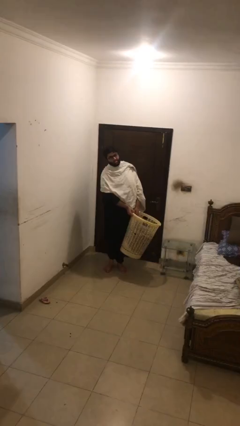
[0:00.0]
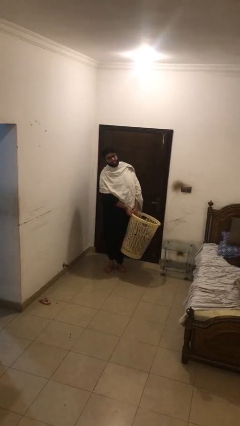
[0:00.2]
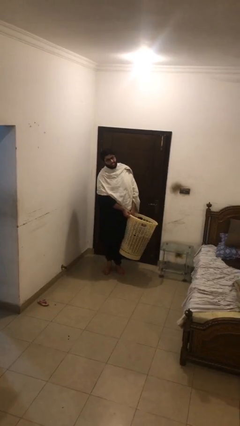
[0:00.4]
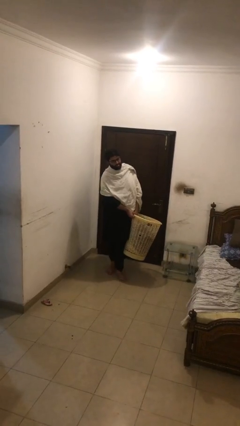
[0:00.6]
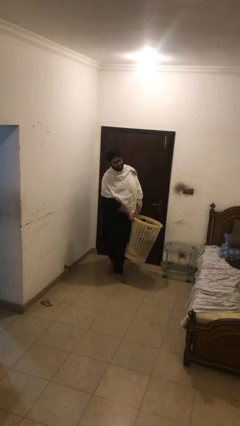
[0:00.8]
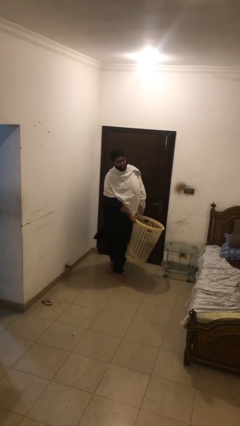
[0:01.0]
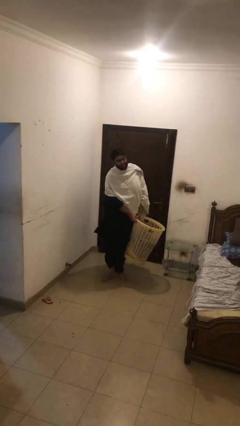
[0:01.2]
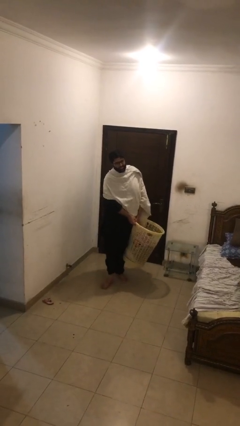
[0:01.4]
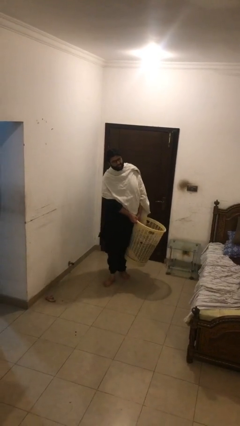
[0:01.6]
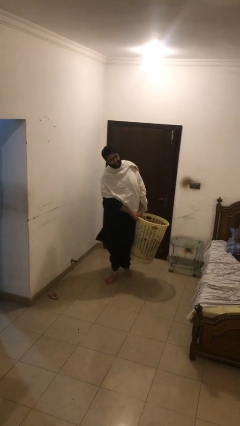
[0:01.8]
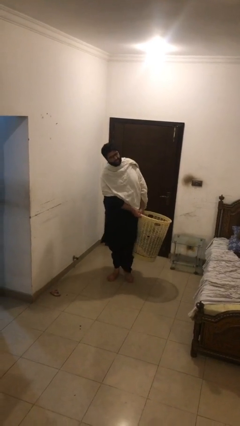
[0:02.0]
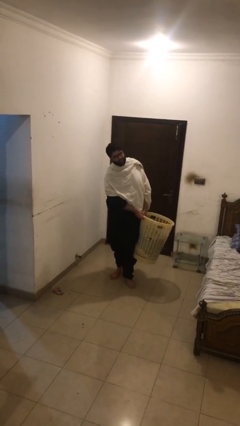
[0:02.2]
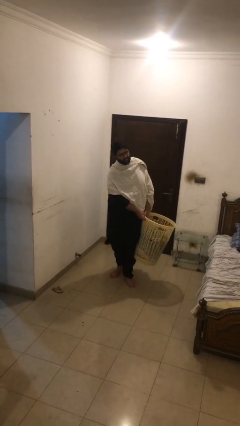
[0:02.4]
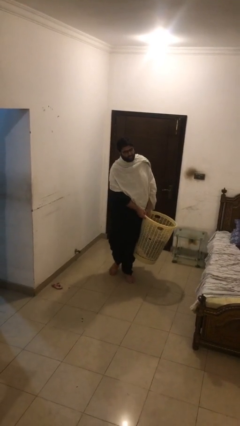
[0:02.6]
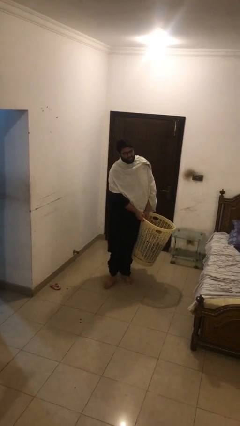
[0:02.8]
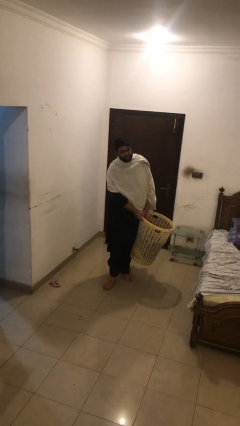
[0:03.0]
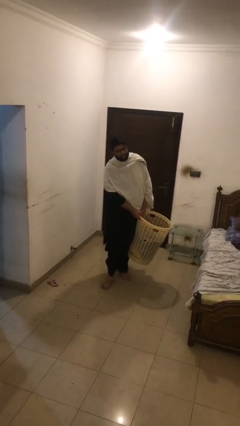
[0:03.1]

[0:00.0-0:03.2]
person carries heavy object

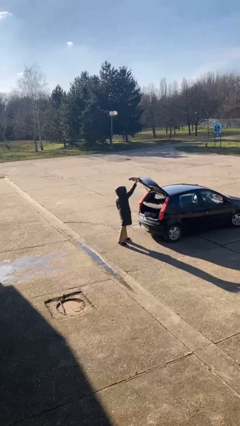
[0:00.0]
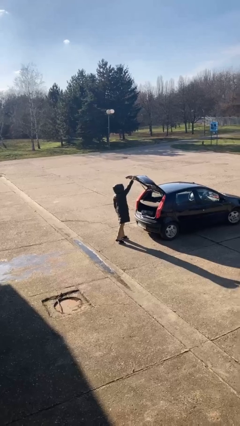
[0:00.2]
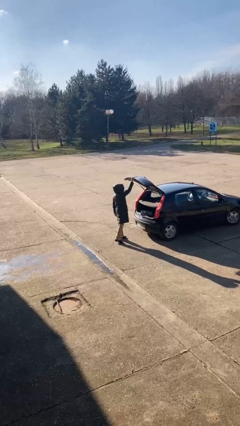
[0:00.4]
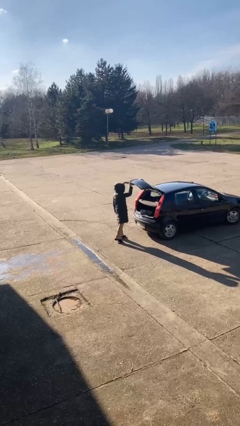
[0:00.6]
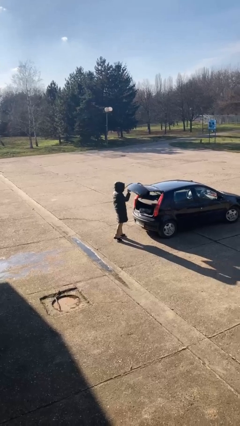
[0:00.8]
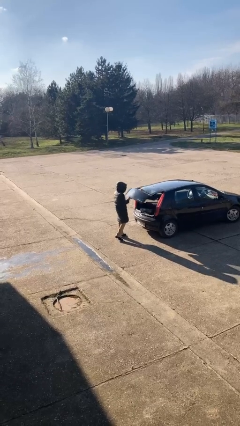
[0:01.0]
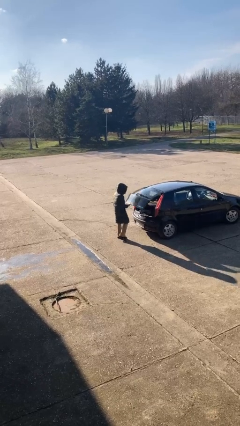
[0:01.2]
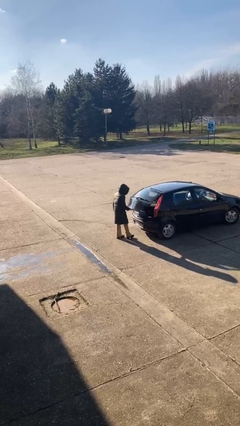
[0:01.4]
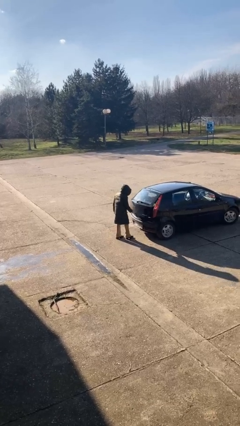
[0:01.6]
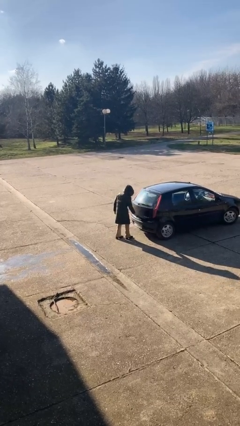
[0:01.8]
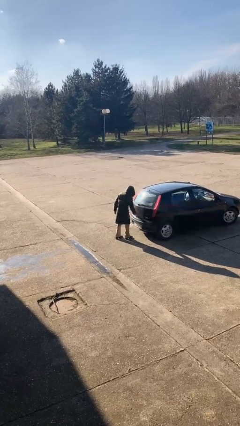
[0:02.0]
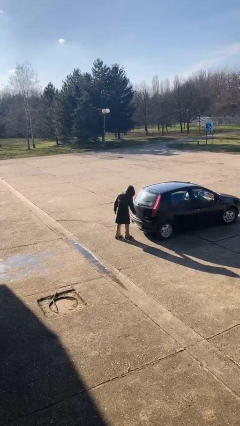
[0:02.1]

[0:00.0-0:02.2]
person closes car trunk

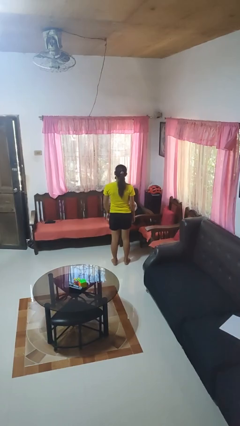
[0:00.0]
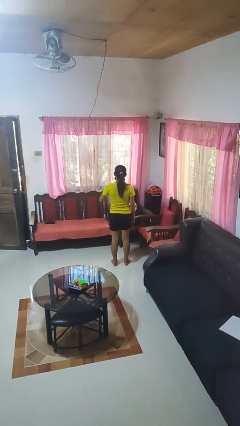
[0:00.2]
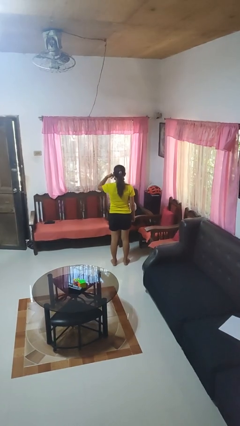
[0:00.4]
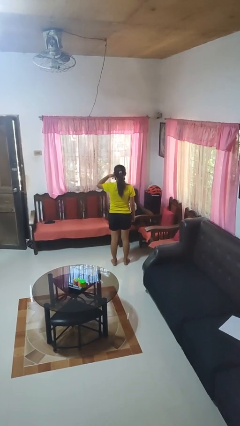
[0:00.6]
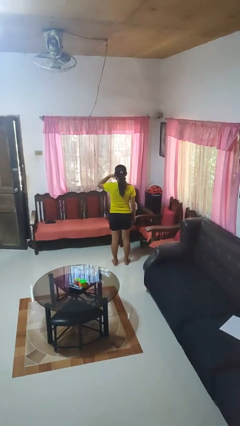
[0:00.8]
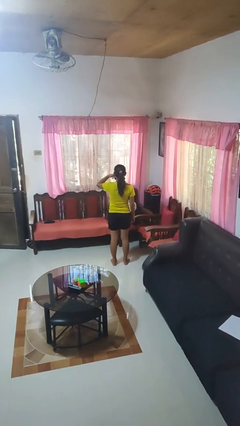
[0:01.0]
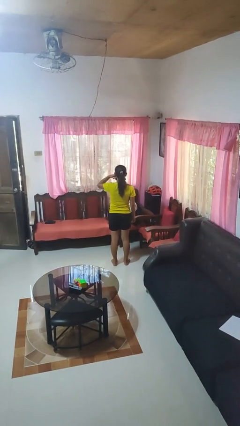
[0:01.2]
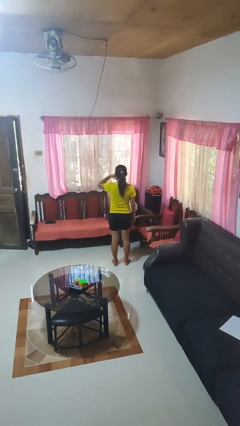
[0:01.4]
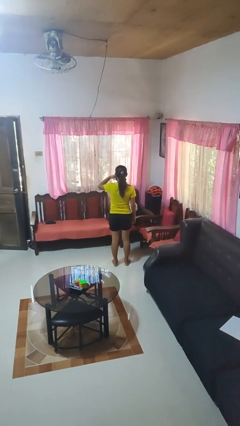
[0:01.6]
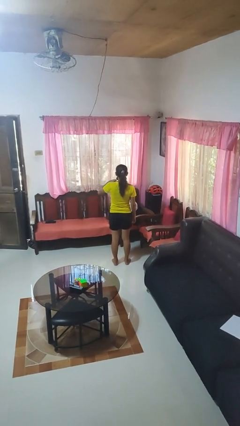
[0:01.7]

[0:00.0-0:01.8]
person gestures call me

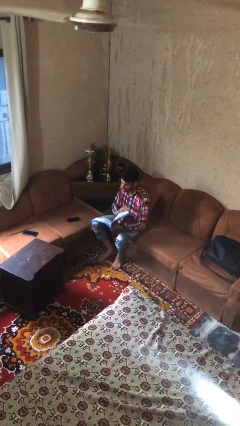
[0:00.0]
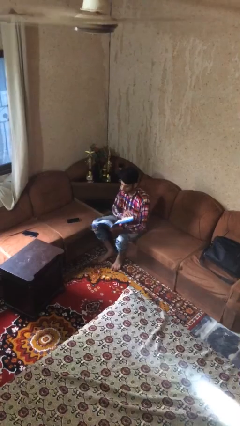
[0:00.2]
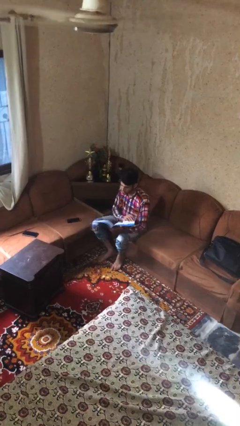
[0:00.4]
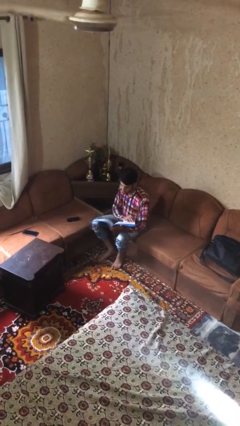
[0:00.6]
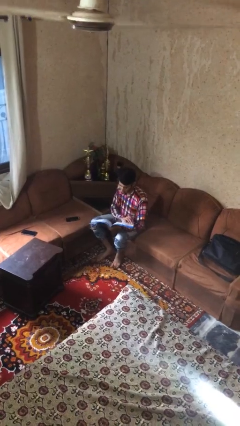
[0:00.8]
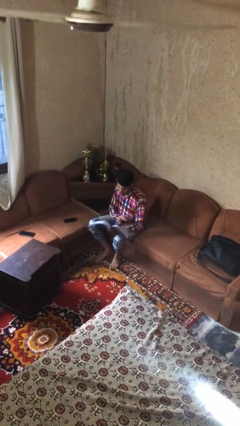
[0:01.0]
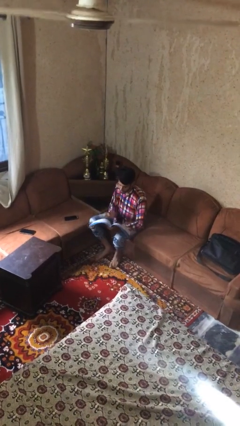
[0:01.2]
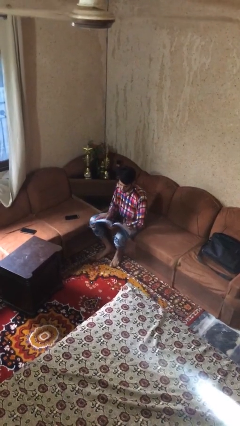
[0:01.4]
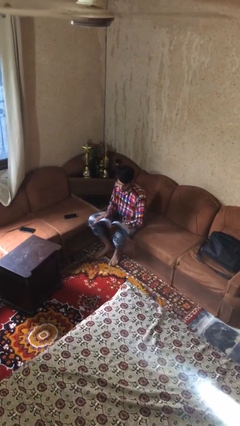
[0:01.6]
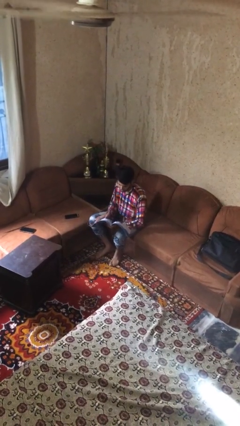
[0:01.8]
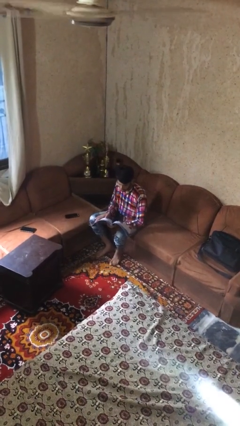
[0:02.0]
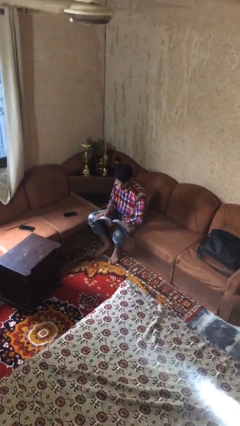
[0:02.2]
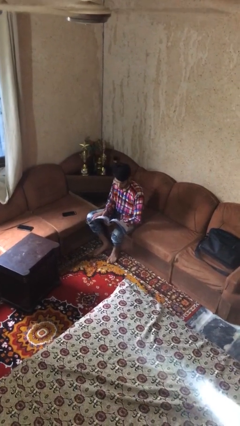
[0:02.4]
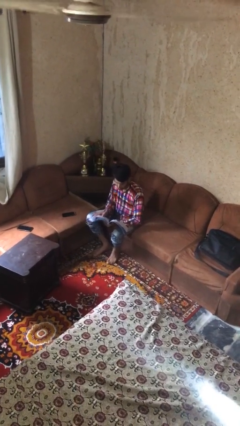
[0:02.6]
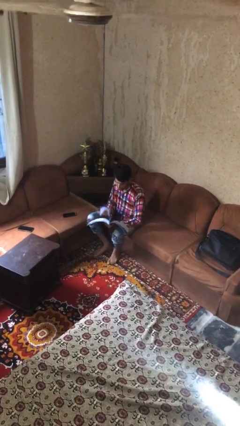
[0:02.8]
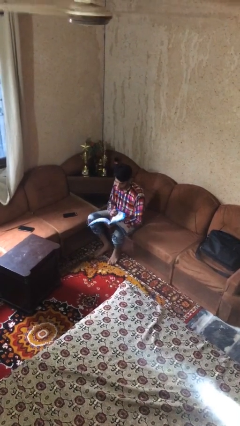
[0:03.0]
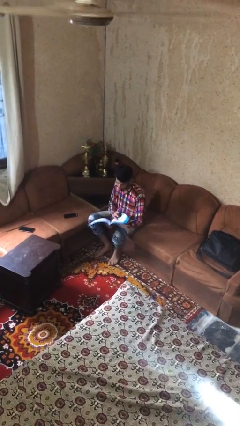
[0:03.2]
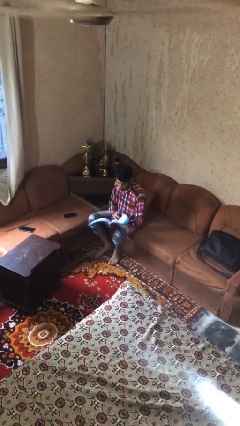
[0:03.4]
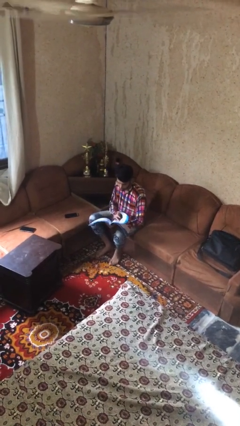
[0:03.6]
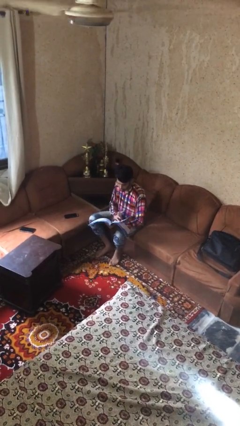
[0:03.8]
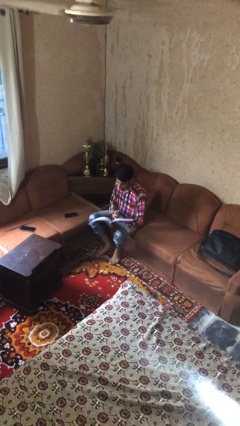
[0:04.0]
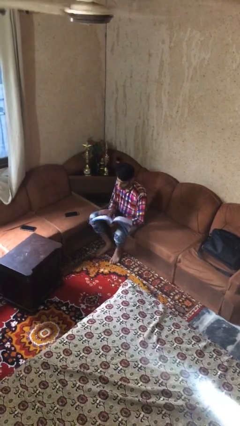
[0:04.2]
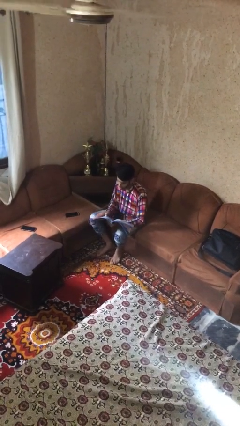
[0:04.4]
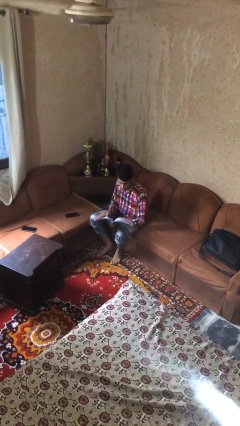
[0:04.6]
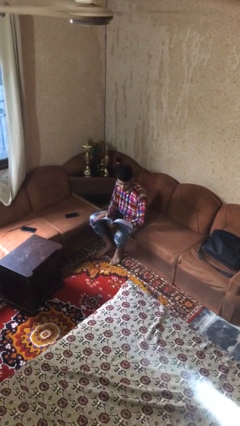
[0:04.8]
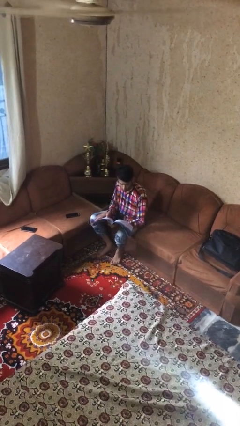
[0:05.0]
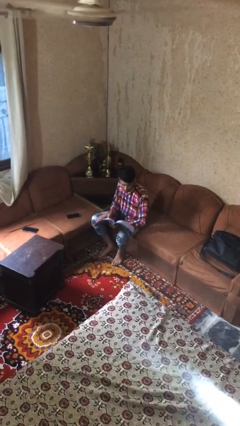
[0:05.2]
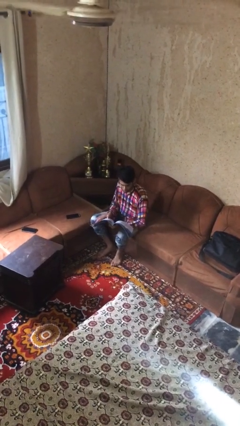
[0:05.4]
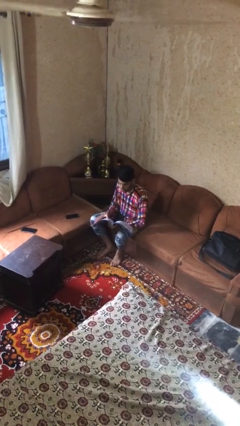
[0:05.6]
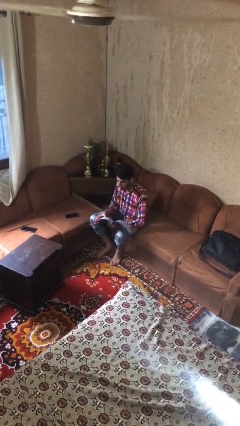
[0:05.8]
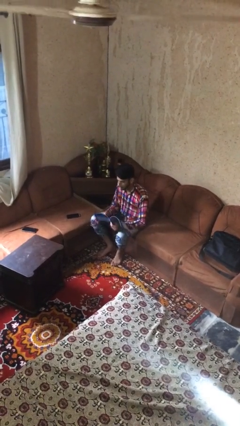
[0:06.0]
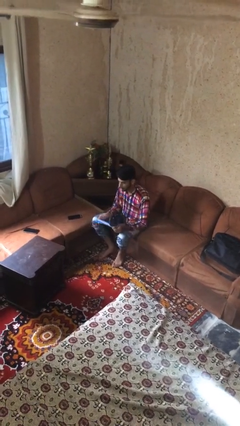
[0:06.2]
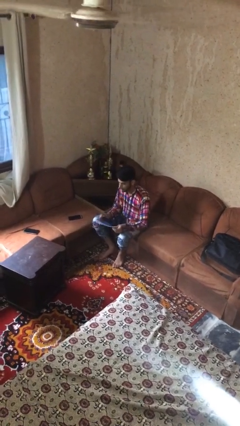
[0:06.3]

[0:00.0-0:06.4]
person reads document

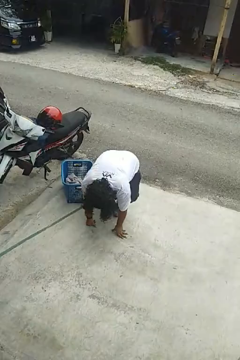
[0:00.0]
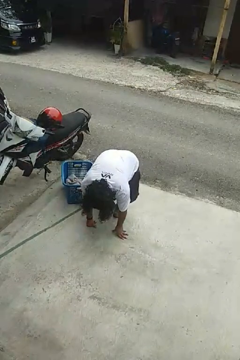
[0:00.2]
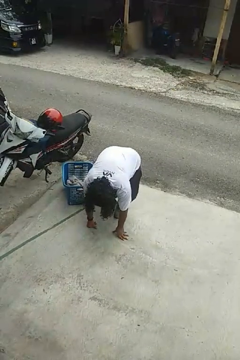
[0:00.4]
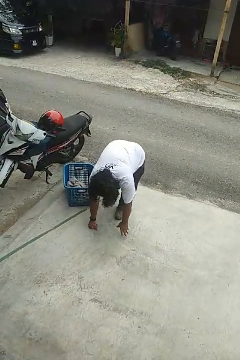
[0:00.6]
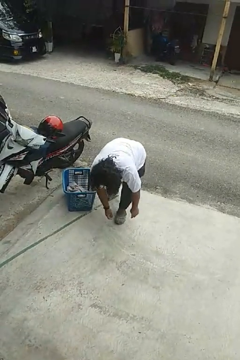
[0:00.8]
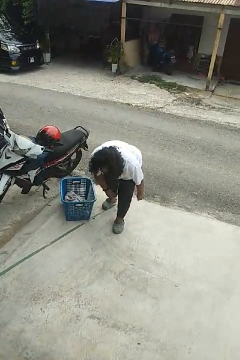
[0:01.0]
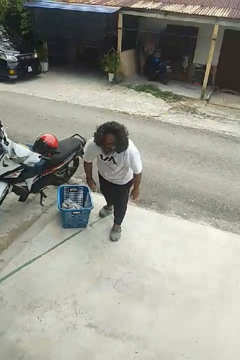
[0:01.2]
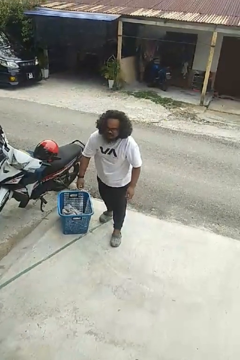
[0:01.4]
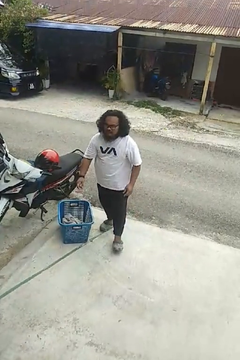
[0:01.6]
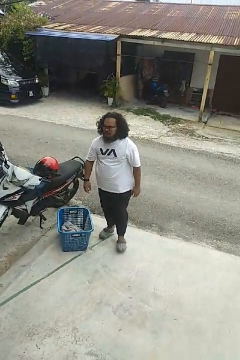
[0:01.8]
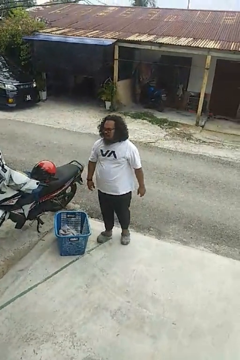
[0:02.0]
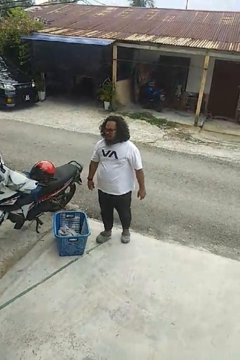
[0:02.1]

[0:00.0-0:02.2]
person stands up from floor

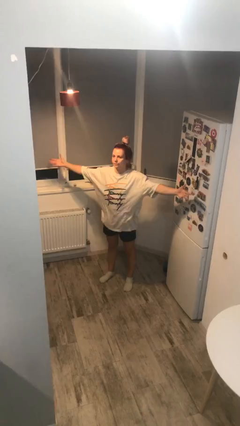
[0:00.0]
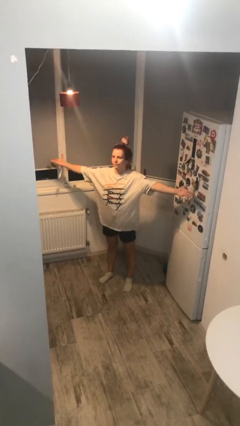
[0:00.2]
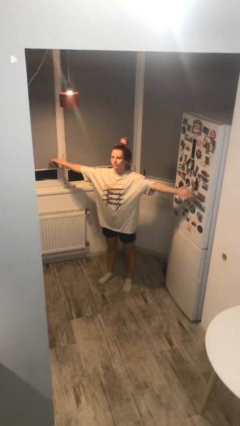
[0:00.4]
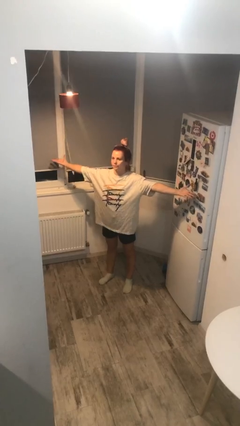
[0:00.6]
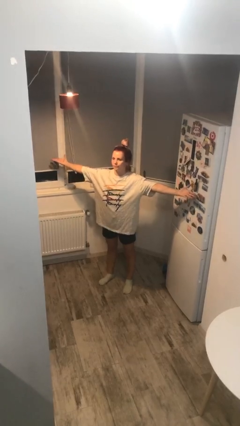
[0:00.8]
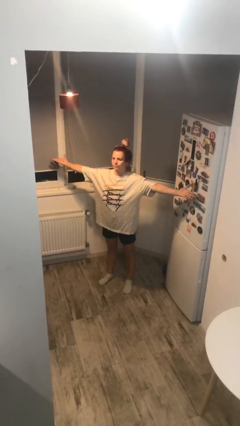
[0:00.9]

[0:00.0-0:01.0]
person stretches arms to side

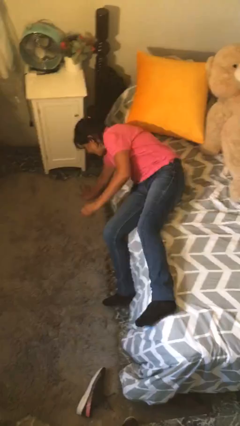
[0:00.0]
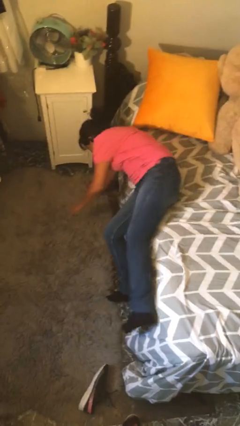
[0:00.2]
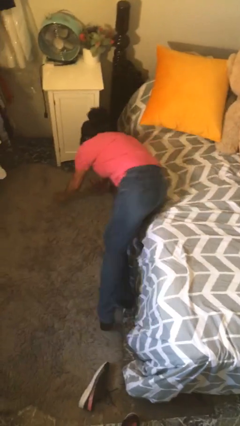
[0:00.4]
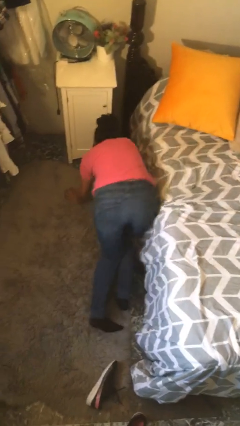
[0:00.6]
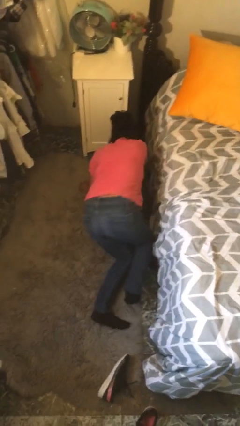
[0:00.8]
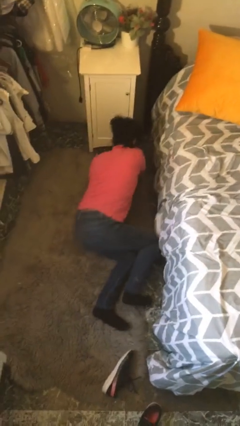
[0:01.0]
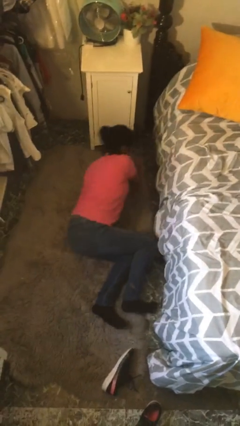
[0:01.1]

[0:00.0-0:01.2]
person falls from bed
